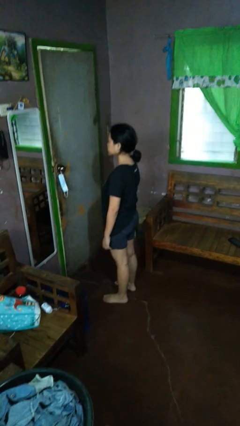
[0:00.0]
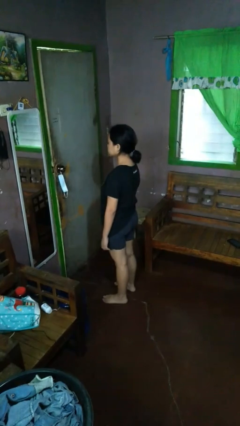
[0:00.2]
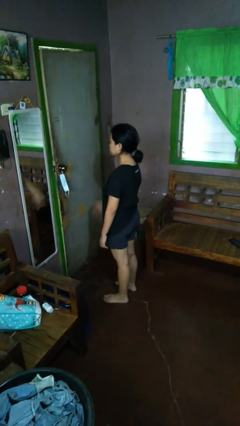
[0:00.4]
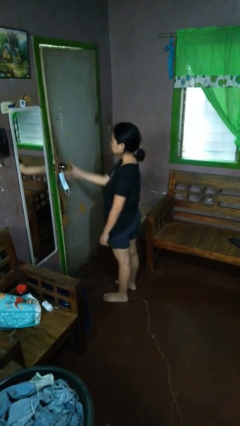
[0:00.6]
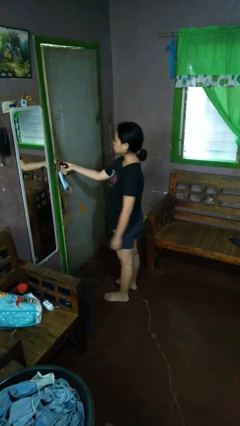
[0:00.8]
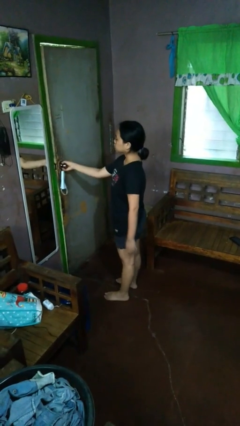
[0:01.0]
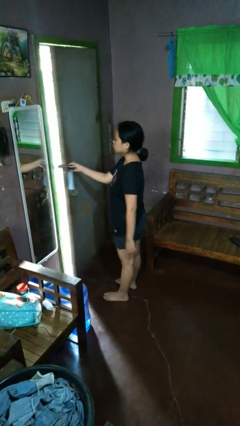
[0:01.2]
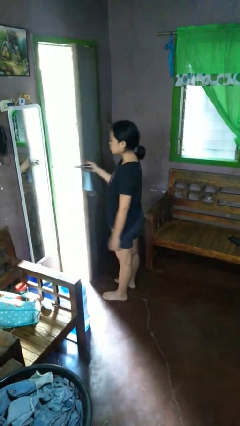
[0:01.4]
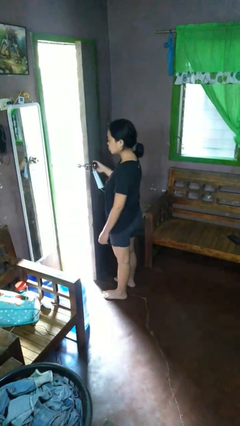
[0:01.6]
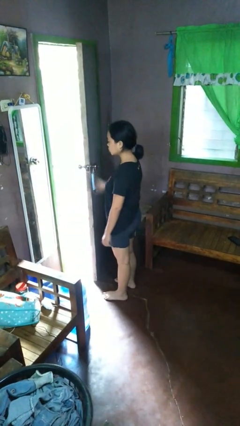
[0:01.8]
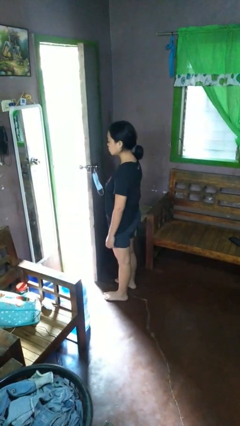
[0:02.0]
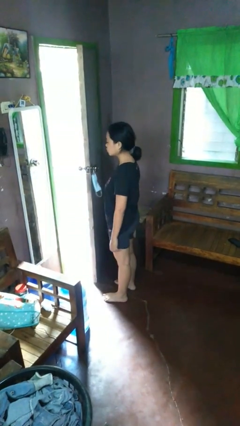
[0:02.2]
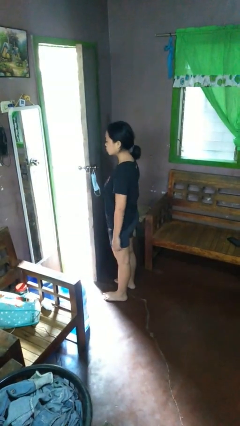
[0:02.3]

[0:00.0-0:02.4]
person opens facility door

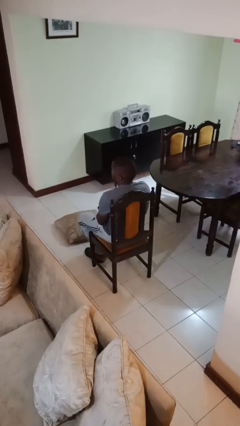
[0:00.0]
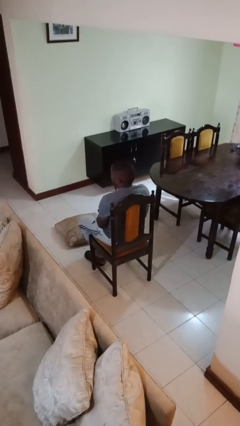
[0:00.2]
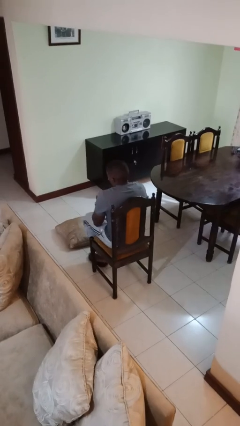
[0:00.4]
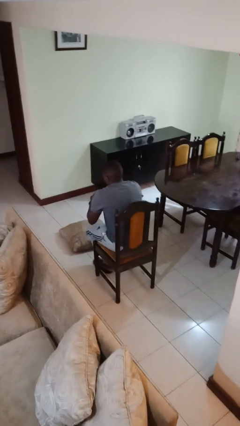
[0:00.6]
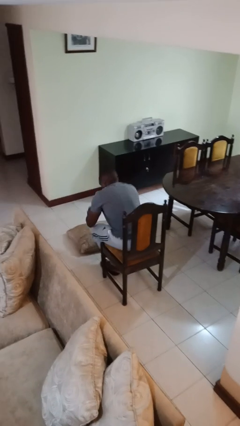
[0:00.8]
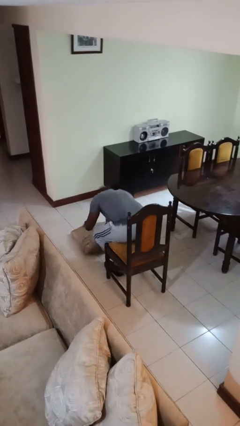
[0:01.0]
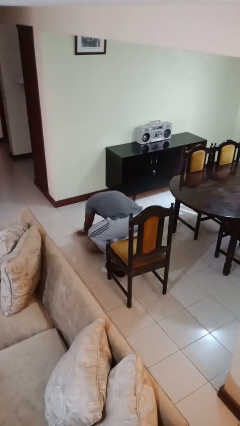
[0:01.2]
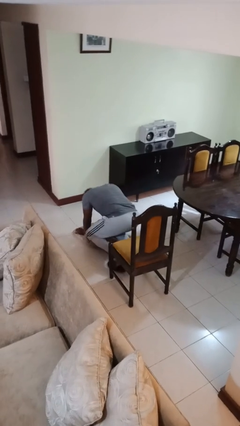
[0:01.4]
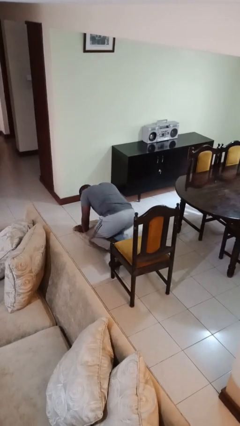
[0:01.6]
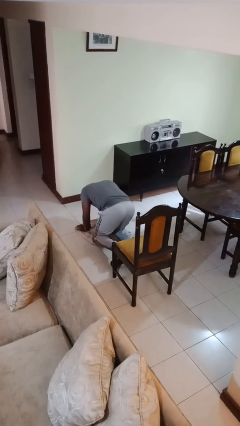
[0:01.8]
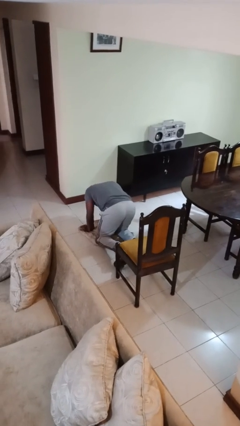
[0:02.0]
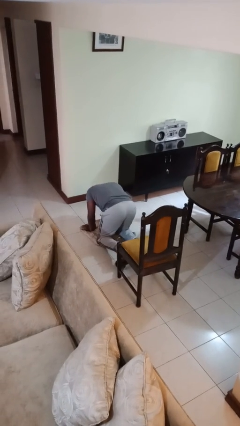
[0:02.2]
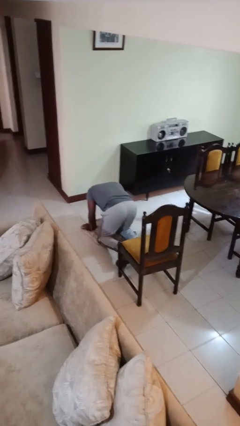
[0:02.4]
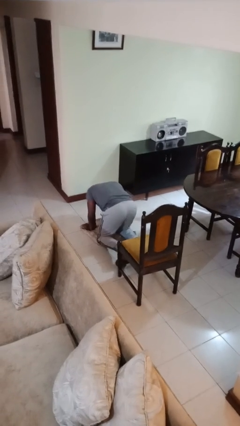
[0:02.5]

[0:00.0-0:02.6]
person falls from chair

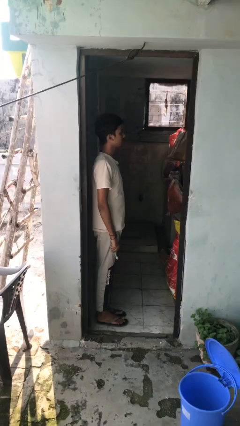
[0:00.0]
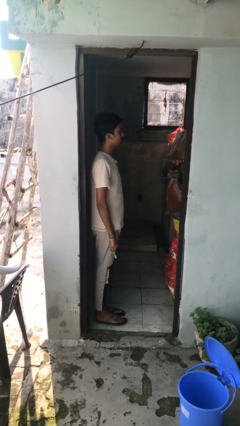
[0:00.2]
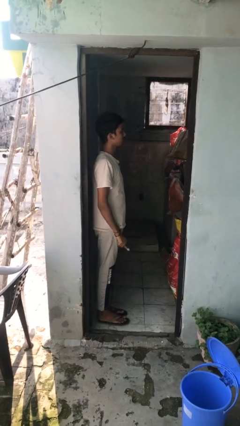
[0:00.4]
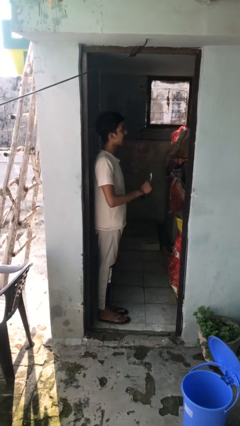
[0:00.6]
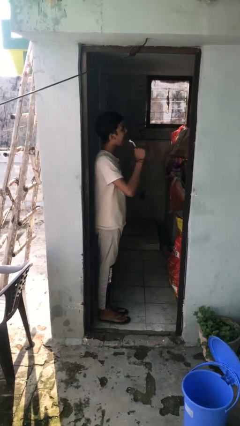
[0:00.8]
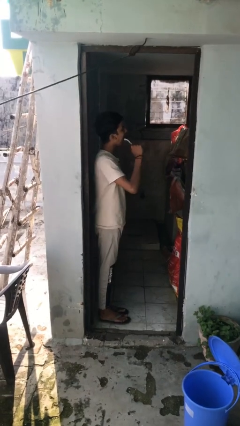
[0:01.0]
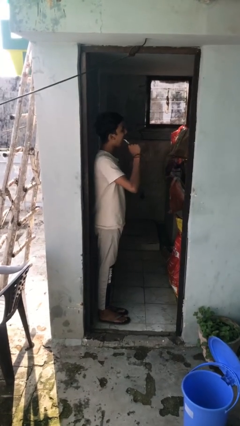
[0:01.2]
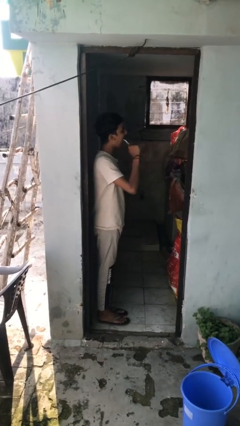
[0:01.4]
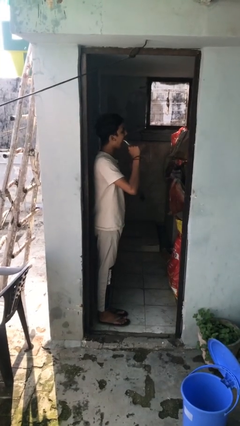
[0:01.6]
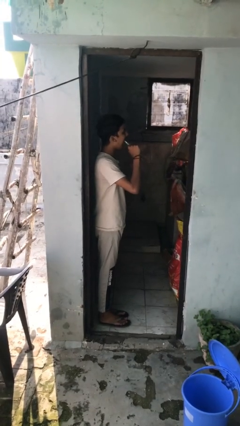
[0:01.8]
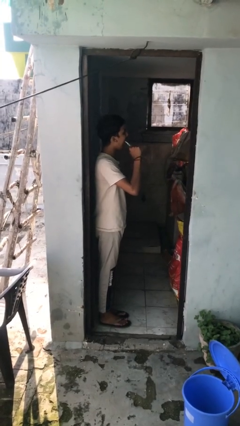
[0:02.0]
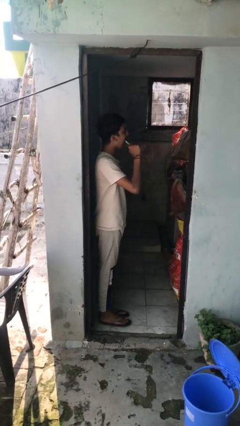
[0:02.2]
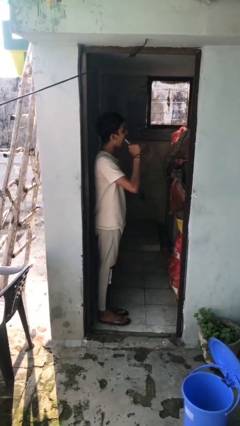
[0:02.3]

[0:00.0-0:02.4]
person brushes teeth

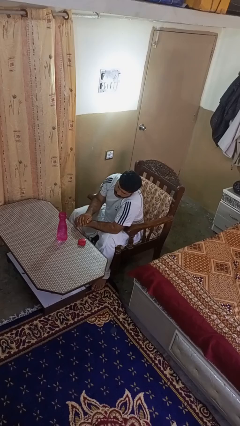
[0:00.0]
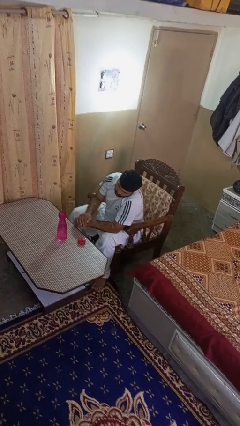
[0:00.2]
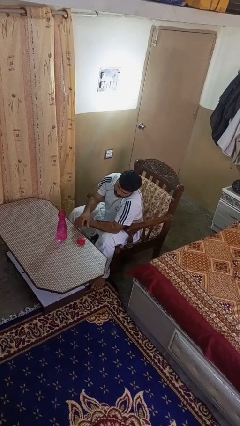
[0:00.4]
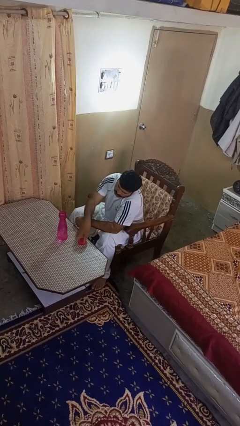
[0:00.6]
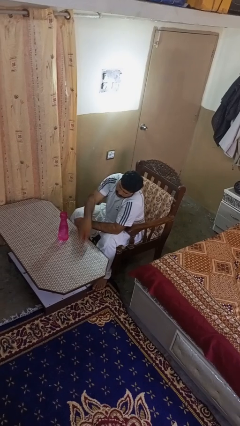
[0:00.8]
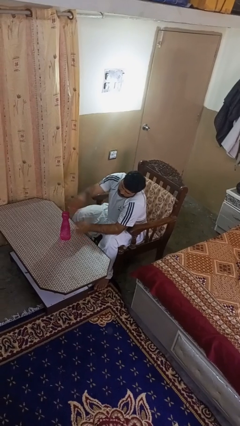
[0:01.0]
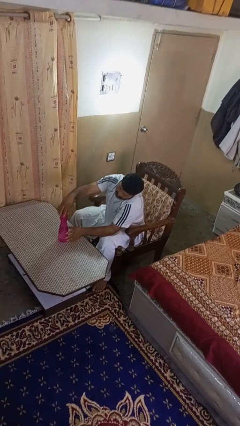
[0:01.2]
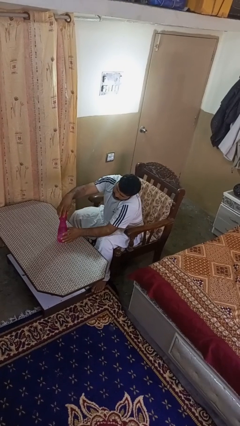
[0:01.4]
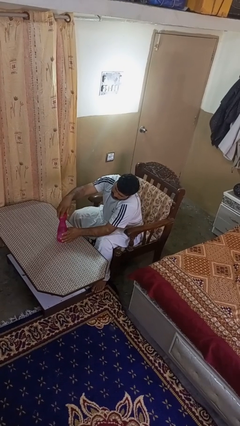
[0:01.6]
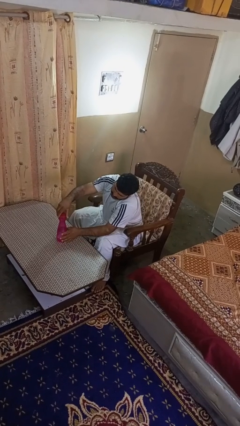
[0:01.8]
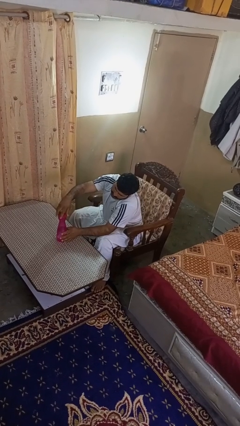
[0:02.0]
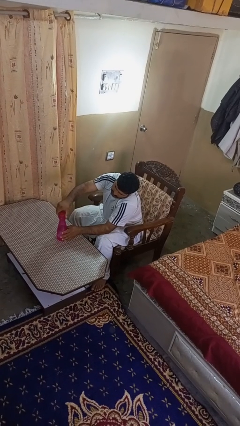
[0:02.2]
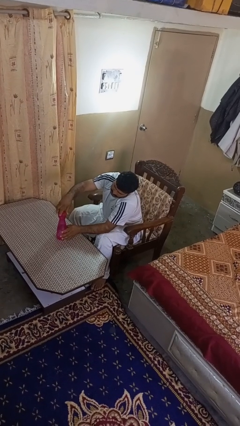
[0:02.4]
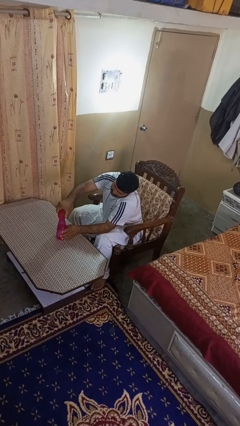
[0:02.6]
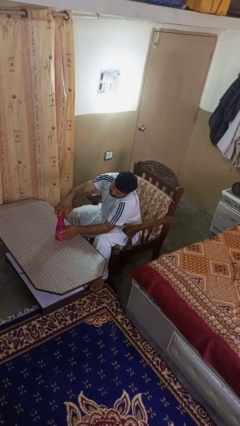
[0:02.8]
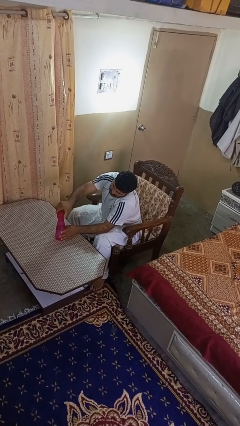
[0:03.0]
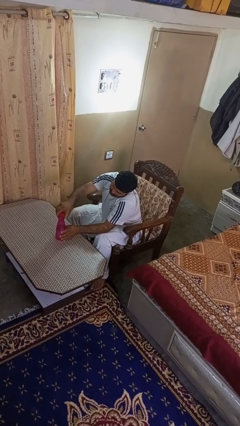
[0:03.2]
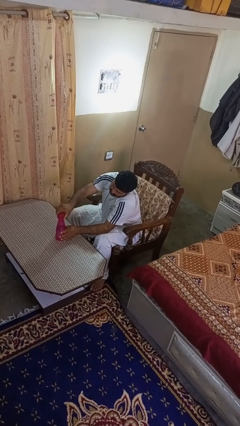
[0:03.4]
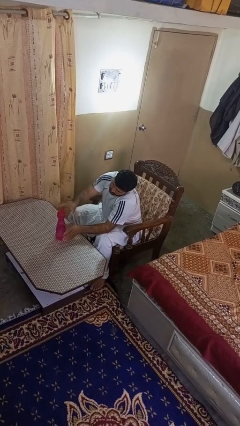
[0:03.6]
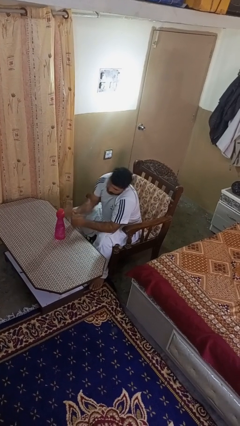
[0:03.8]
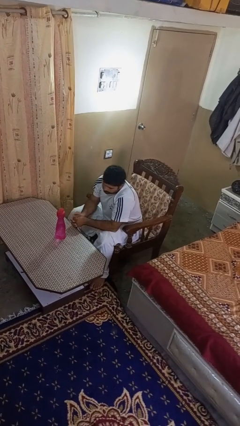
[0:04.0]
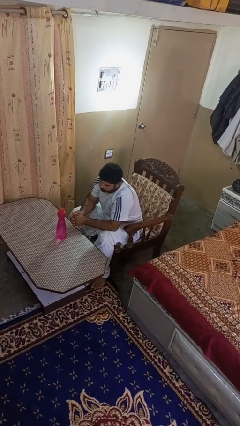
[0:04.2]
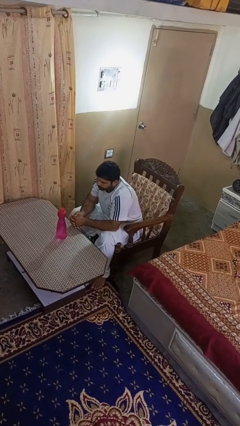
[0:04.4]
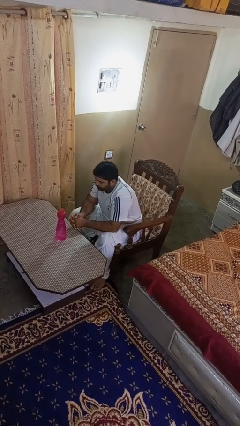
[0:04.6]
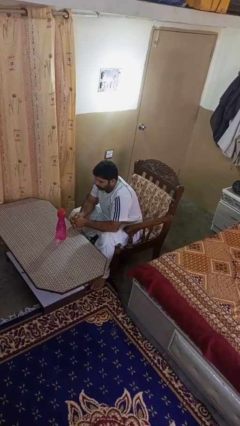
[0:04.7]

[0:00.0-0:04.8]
person screws lid to bottle

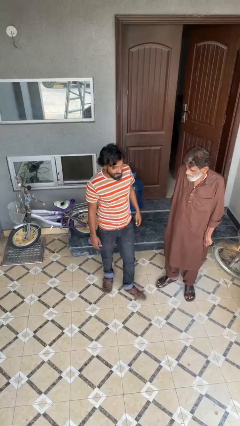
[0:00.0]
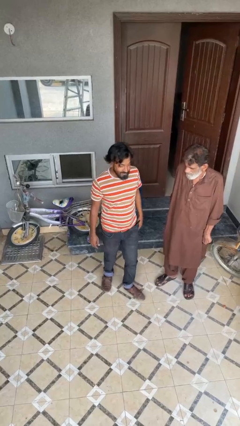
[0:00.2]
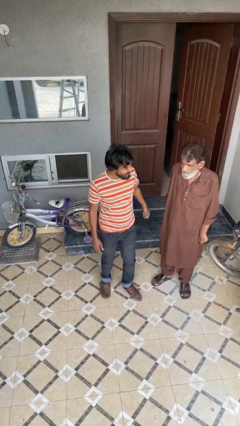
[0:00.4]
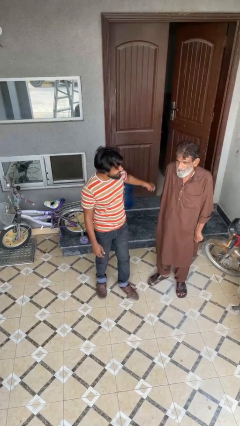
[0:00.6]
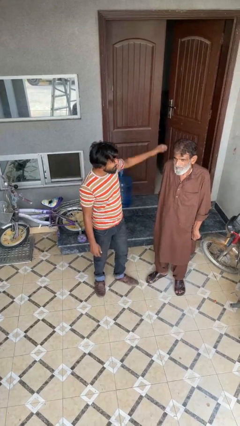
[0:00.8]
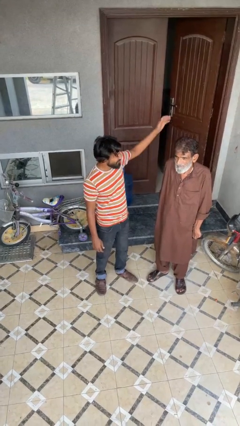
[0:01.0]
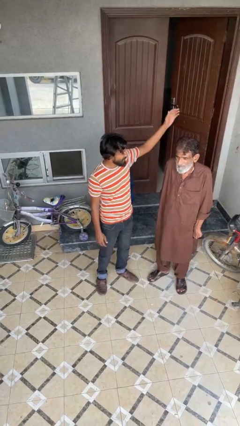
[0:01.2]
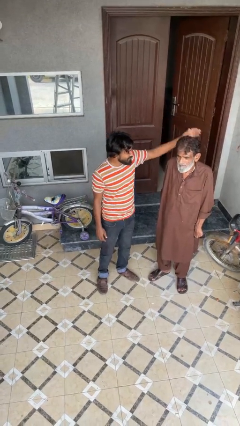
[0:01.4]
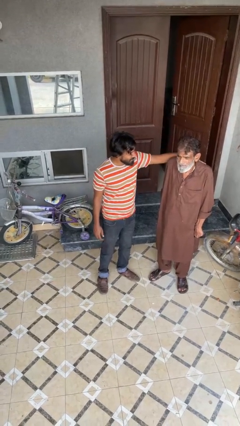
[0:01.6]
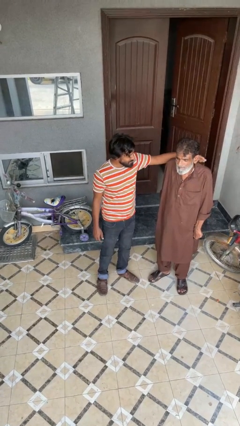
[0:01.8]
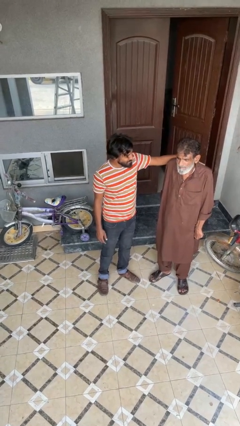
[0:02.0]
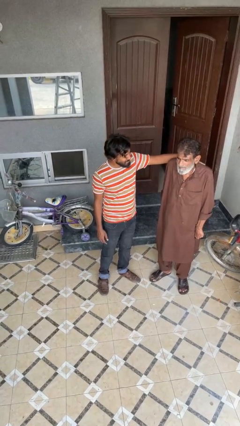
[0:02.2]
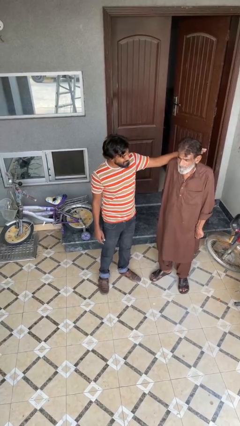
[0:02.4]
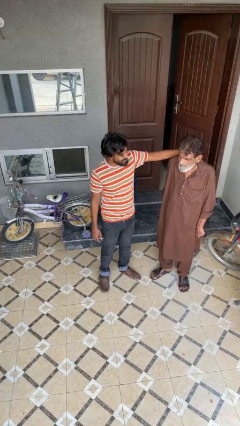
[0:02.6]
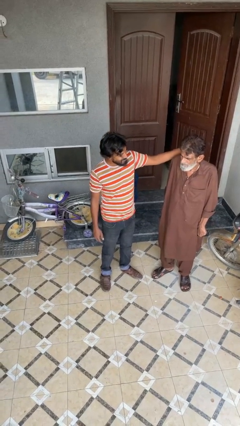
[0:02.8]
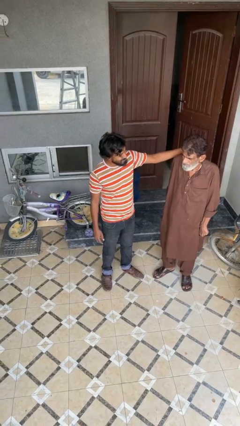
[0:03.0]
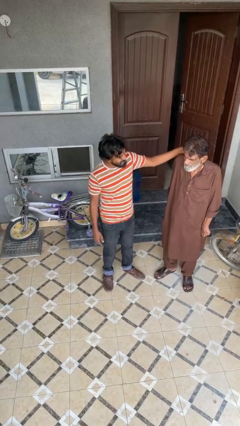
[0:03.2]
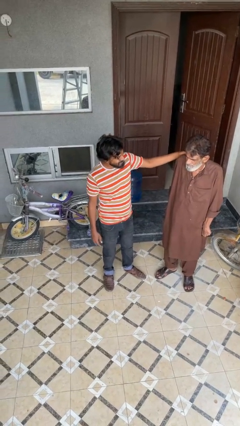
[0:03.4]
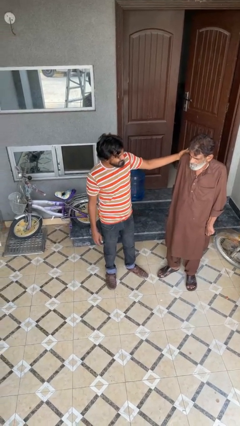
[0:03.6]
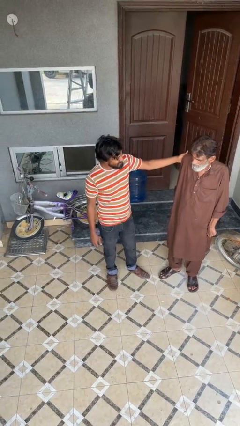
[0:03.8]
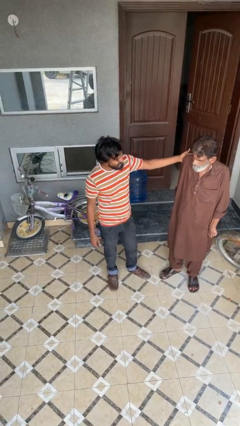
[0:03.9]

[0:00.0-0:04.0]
person pounds shoulders of person

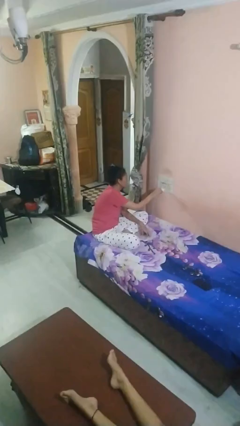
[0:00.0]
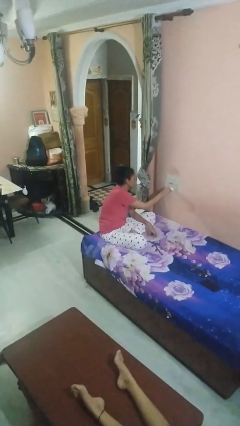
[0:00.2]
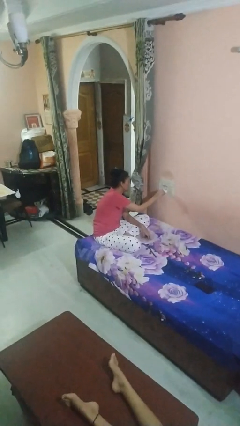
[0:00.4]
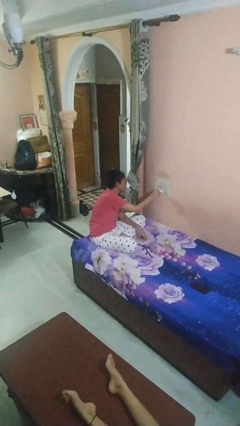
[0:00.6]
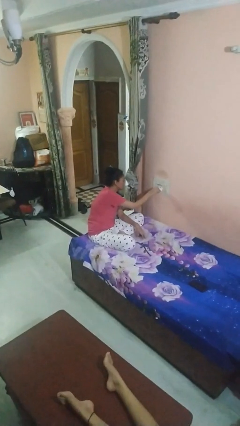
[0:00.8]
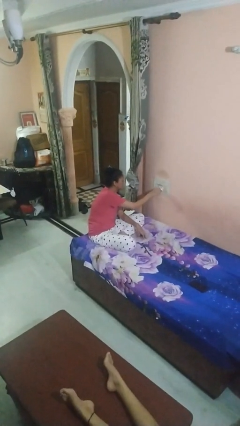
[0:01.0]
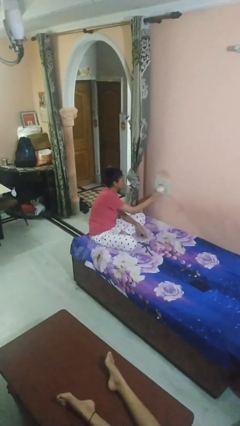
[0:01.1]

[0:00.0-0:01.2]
person plugs into electrical socket

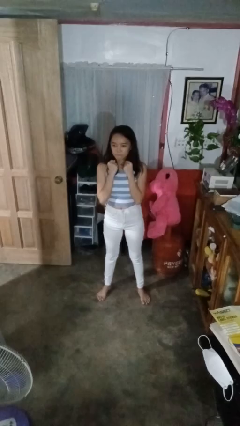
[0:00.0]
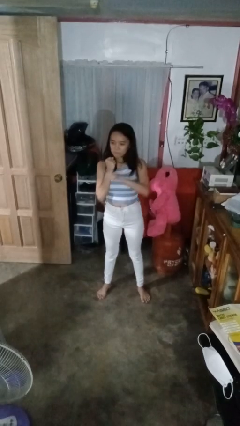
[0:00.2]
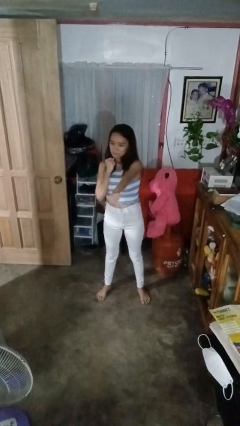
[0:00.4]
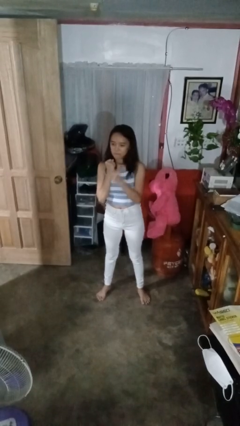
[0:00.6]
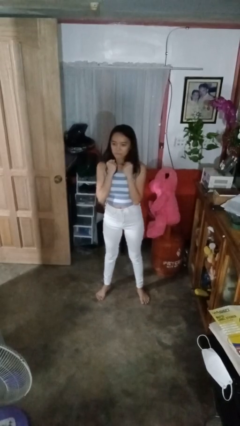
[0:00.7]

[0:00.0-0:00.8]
person punches
